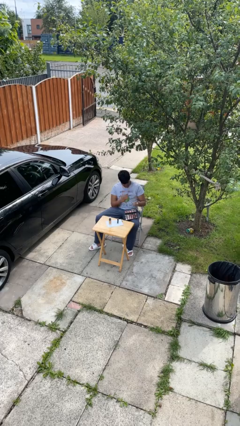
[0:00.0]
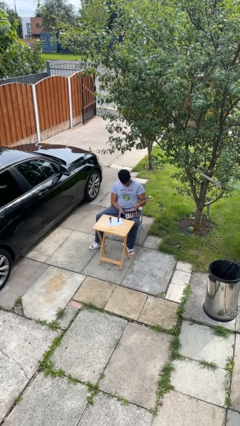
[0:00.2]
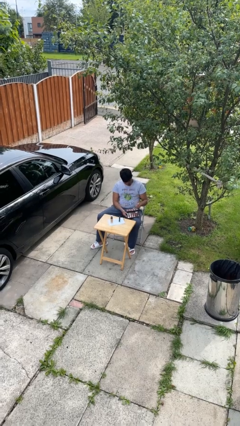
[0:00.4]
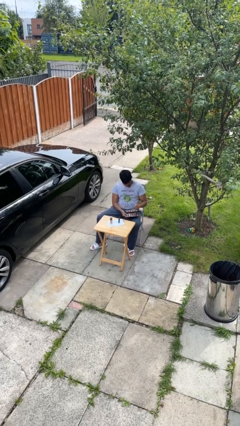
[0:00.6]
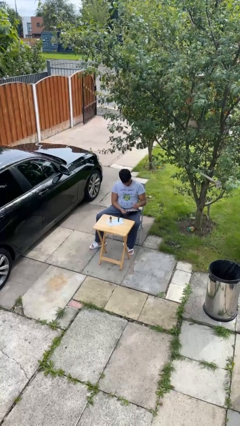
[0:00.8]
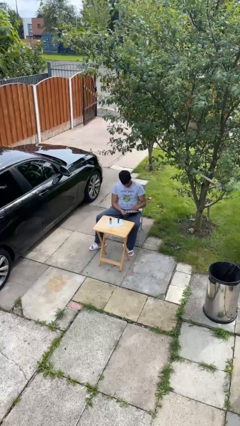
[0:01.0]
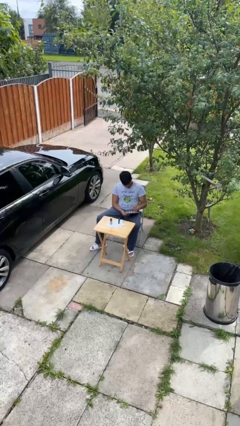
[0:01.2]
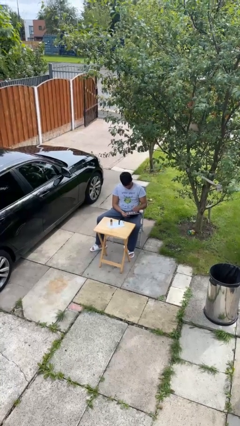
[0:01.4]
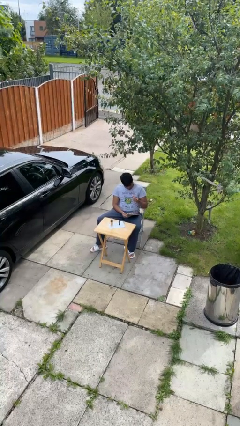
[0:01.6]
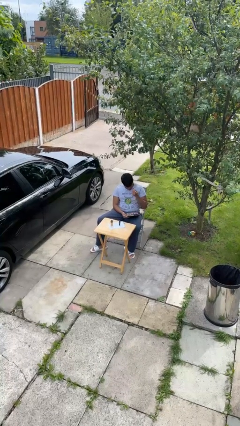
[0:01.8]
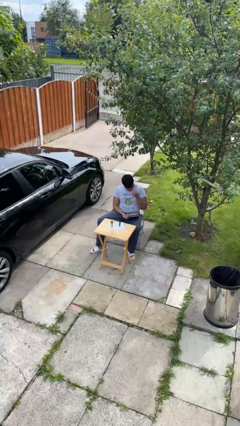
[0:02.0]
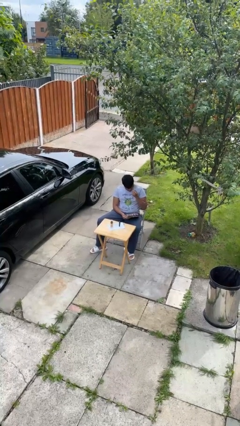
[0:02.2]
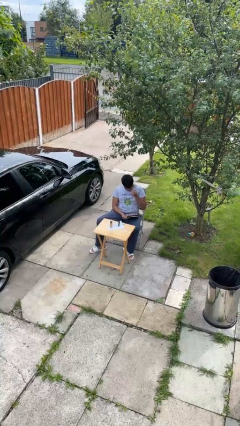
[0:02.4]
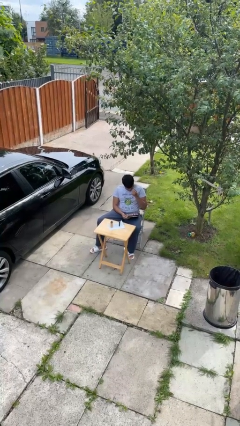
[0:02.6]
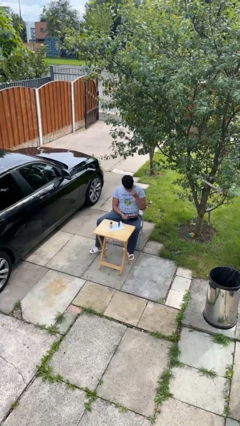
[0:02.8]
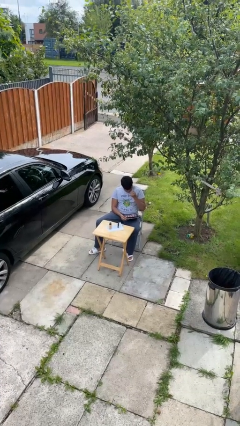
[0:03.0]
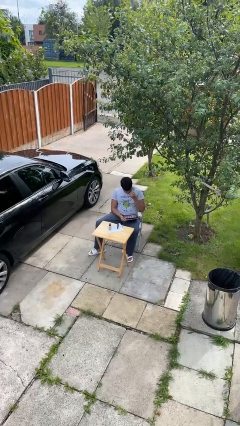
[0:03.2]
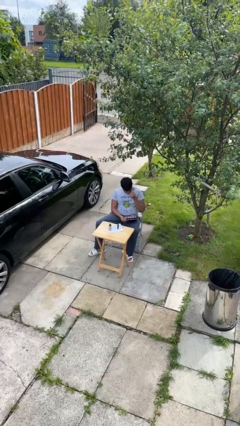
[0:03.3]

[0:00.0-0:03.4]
person applies eye makeup

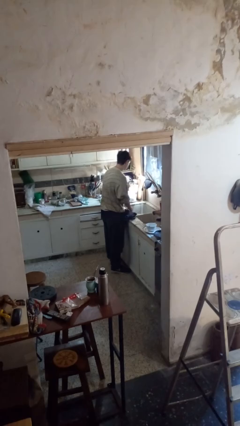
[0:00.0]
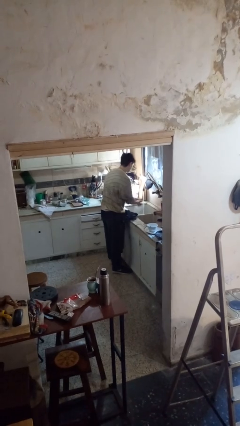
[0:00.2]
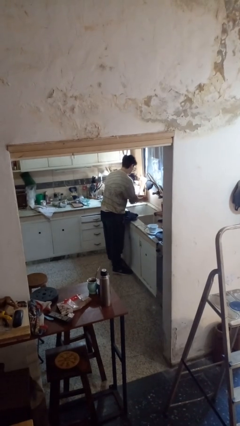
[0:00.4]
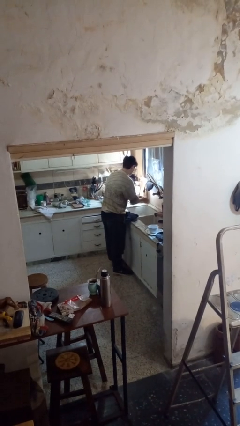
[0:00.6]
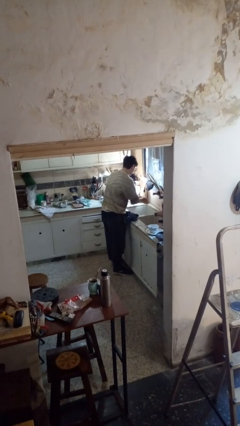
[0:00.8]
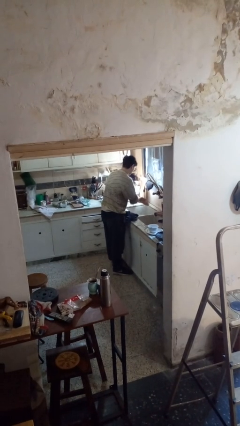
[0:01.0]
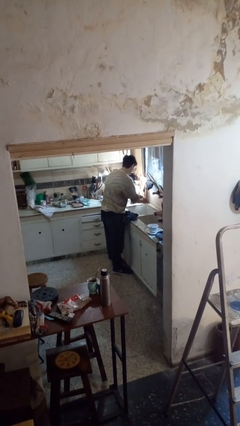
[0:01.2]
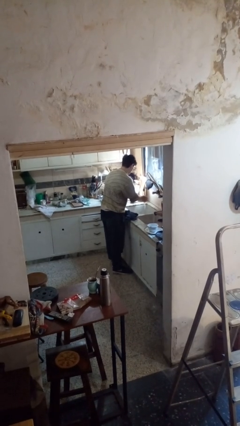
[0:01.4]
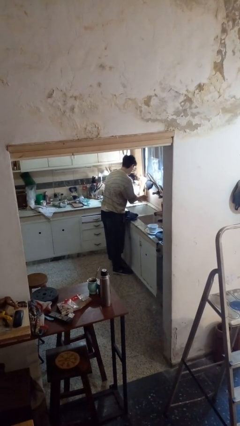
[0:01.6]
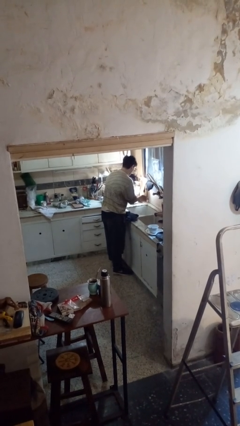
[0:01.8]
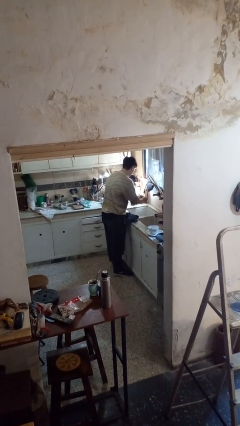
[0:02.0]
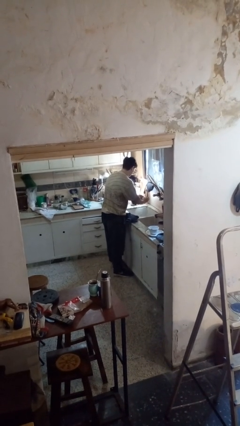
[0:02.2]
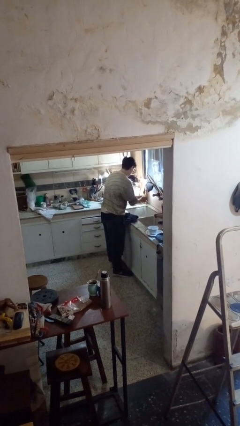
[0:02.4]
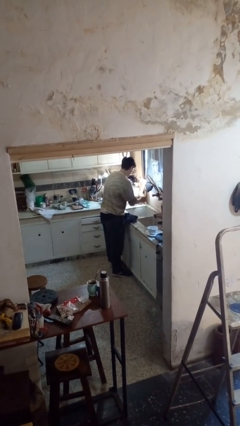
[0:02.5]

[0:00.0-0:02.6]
person washes hands

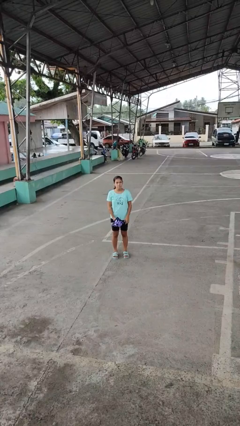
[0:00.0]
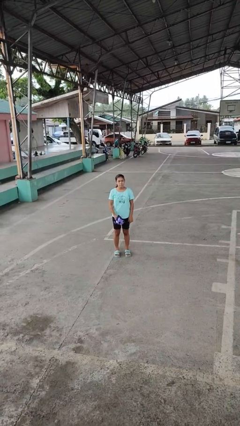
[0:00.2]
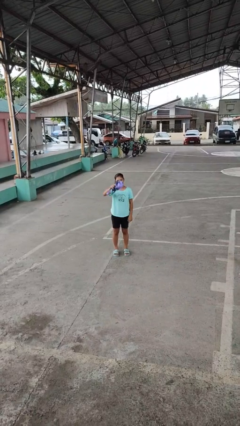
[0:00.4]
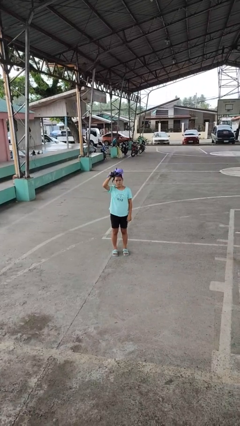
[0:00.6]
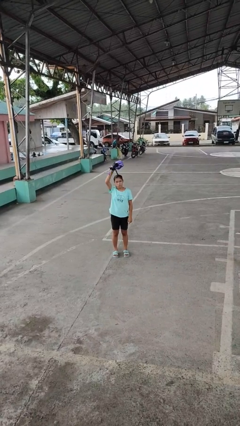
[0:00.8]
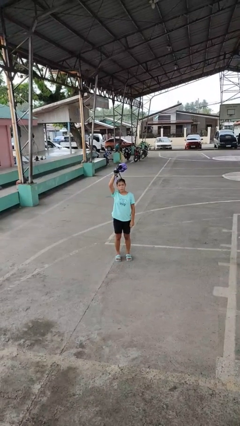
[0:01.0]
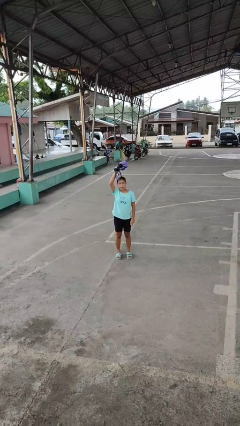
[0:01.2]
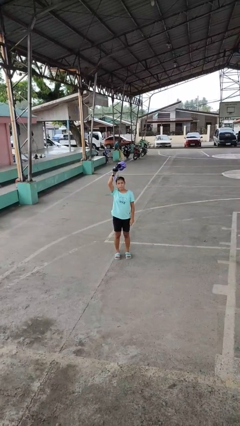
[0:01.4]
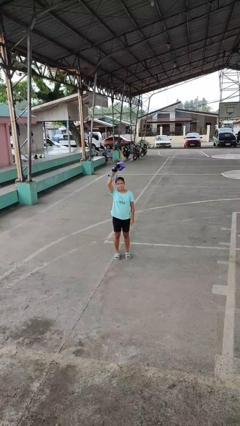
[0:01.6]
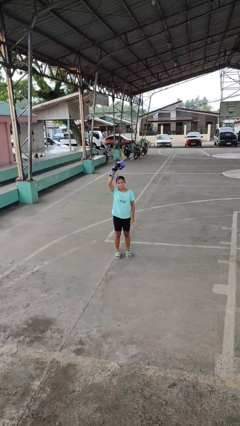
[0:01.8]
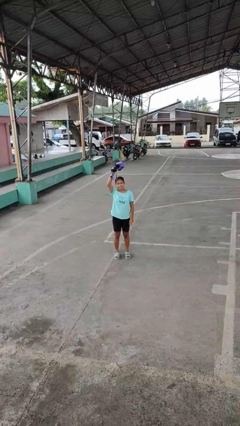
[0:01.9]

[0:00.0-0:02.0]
person holds object above head

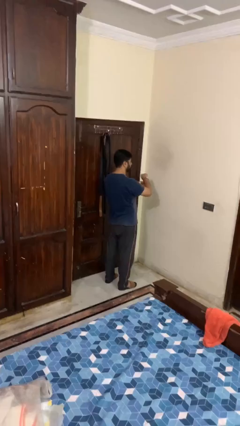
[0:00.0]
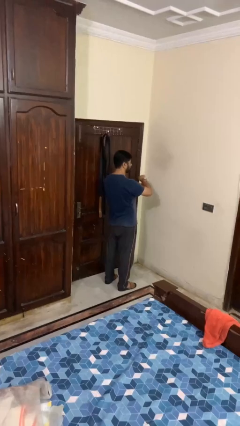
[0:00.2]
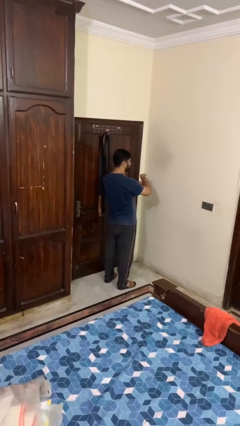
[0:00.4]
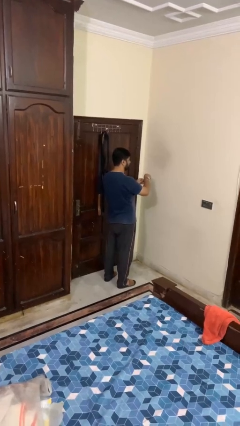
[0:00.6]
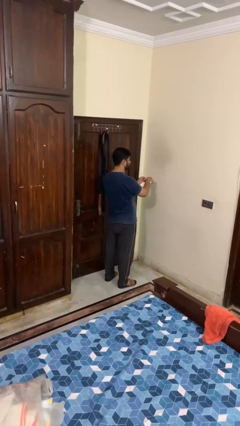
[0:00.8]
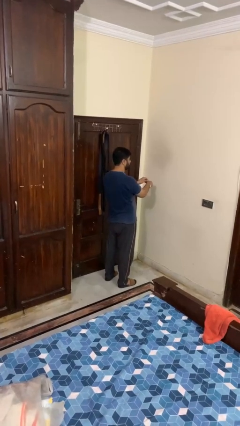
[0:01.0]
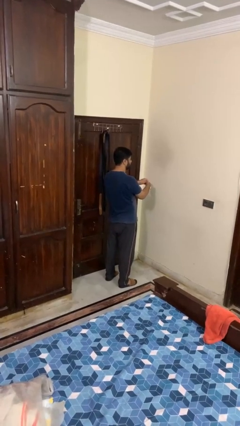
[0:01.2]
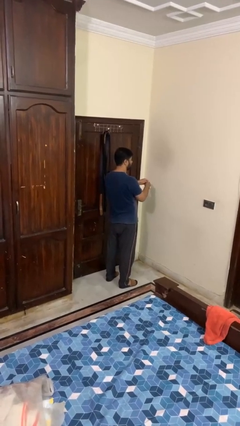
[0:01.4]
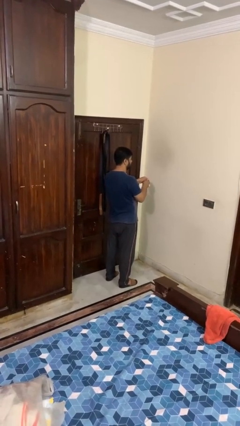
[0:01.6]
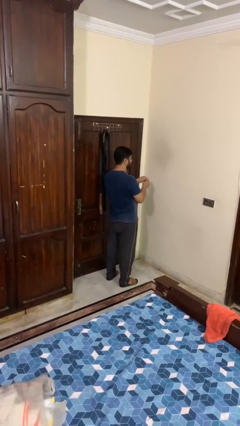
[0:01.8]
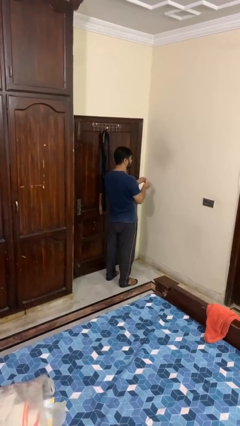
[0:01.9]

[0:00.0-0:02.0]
person takes off wristwatch

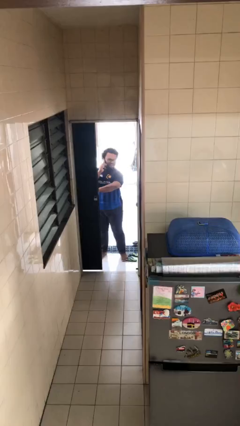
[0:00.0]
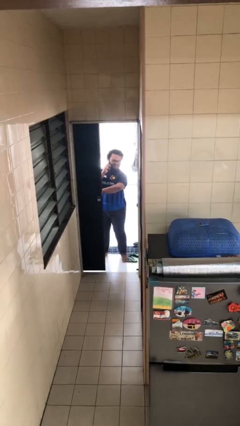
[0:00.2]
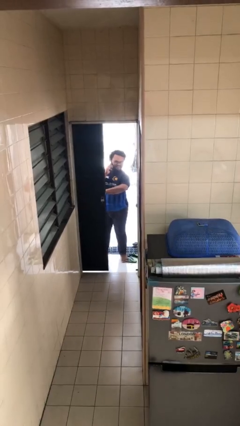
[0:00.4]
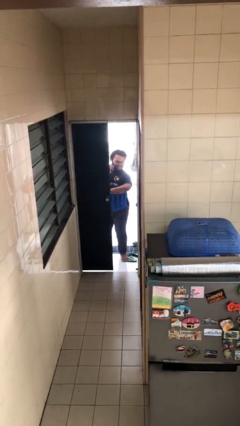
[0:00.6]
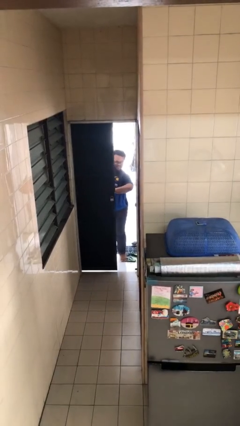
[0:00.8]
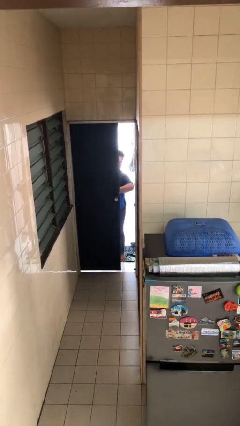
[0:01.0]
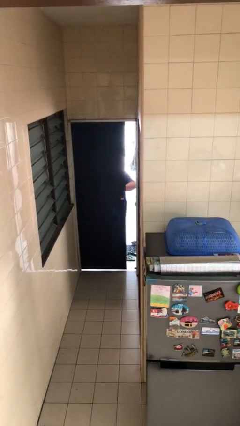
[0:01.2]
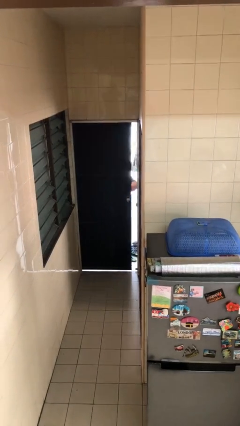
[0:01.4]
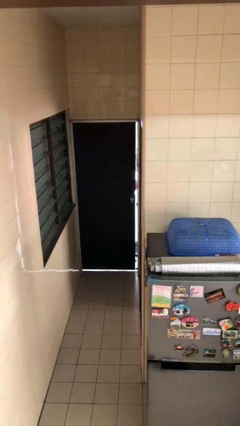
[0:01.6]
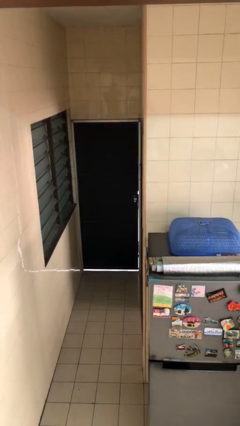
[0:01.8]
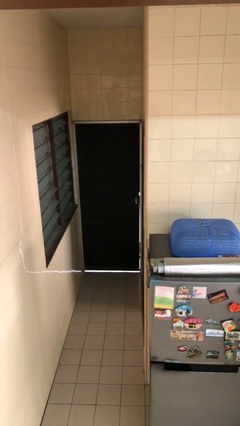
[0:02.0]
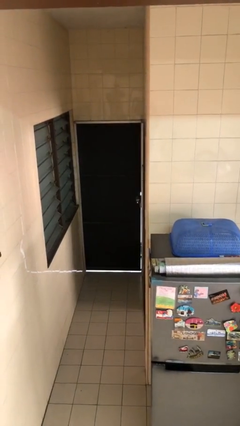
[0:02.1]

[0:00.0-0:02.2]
person closes facility door

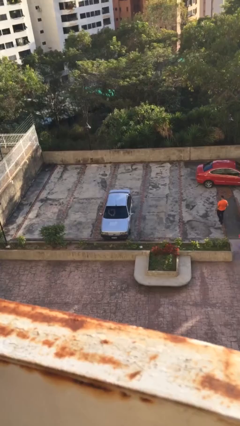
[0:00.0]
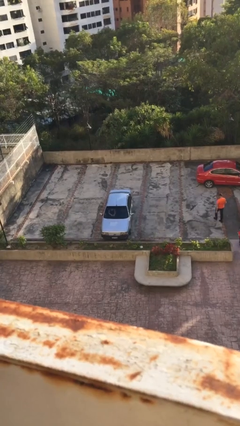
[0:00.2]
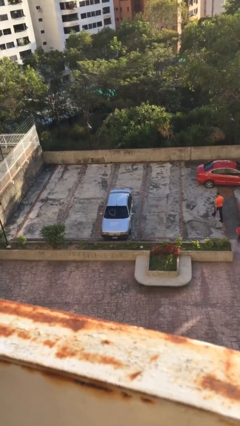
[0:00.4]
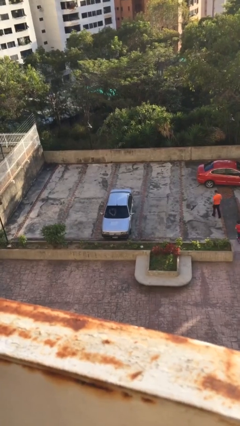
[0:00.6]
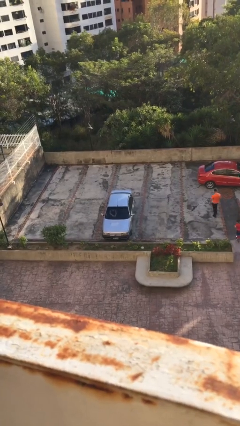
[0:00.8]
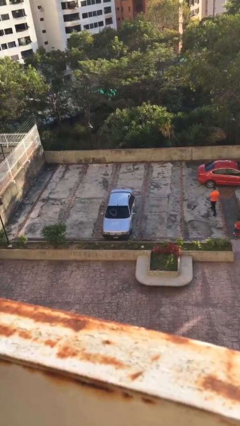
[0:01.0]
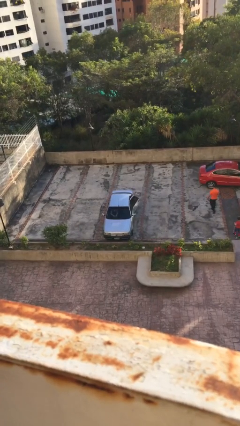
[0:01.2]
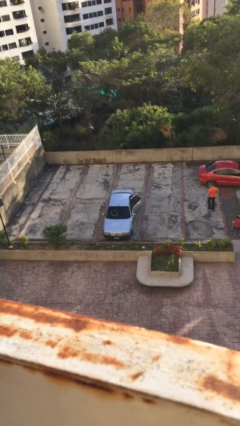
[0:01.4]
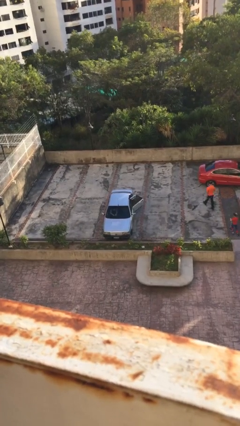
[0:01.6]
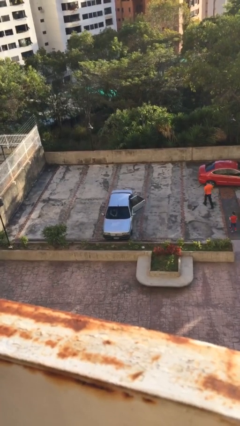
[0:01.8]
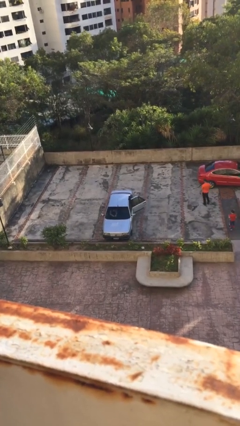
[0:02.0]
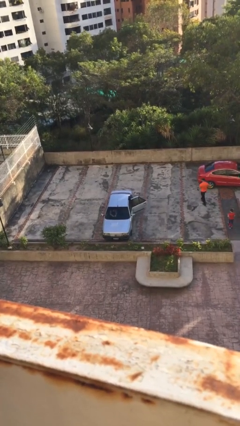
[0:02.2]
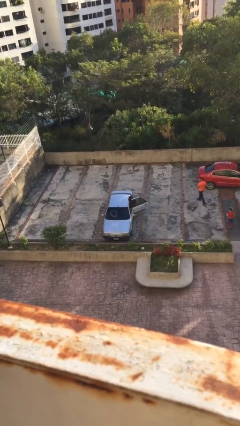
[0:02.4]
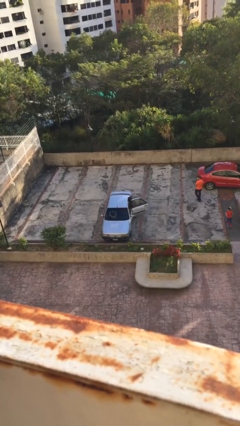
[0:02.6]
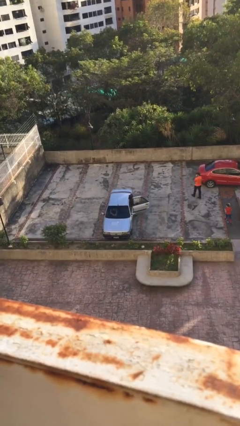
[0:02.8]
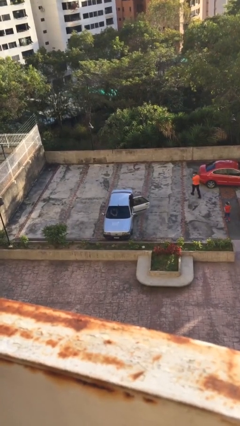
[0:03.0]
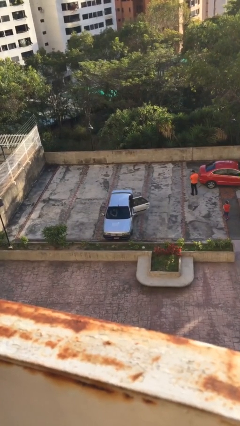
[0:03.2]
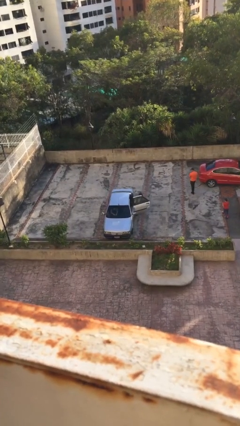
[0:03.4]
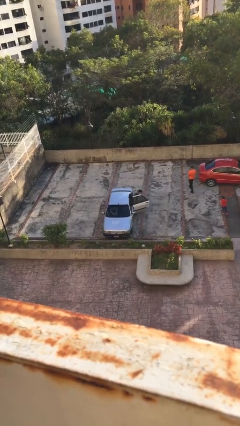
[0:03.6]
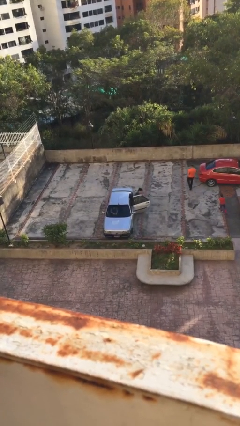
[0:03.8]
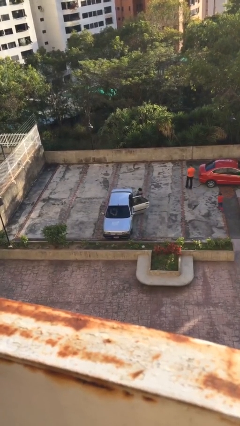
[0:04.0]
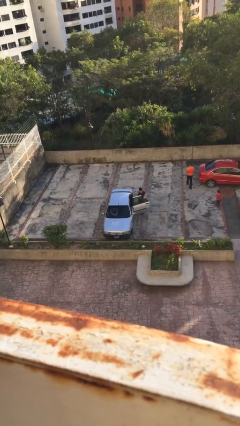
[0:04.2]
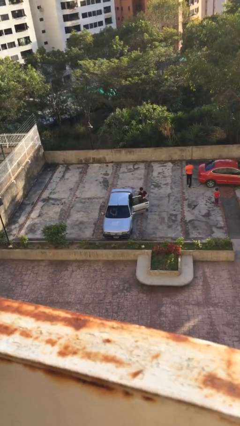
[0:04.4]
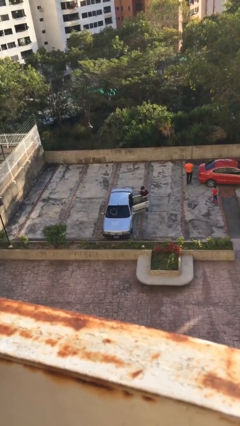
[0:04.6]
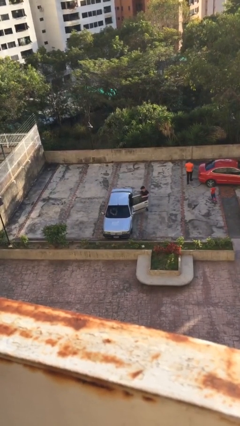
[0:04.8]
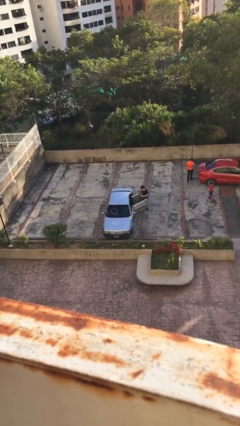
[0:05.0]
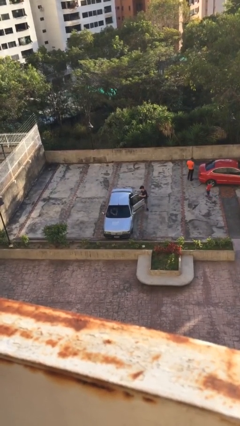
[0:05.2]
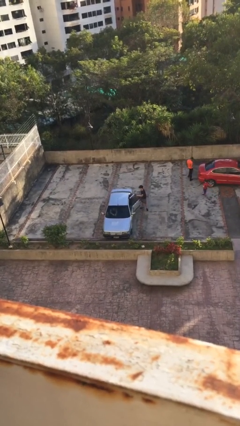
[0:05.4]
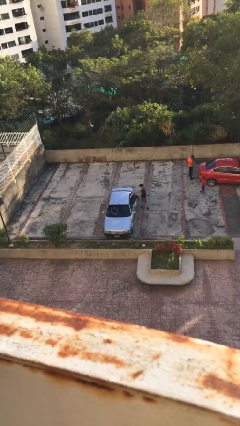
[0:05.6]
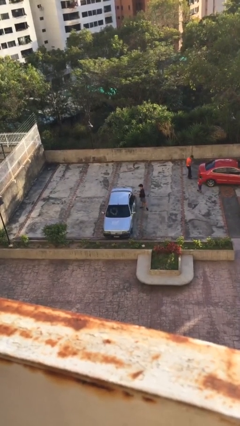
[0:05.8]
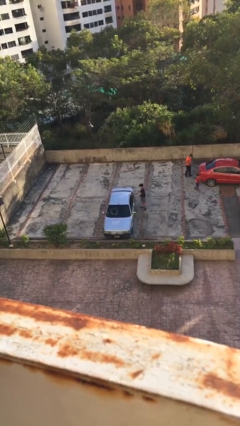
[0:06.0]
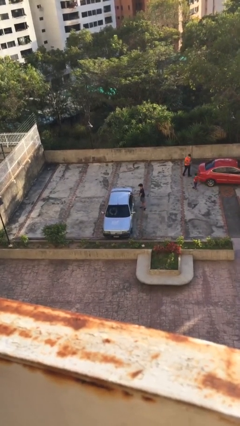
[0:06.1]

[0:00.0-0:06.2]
car drops off person
